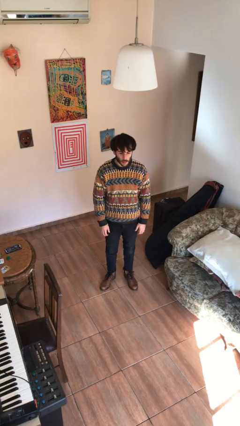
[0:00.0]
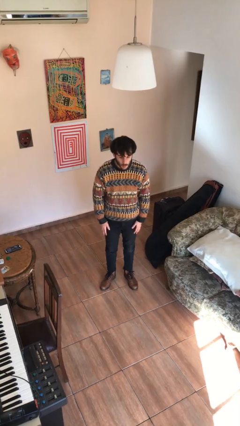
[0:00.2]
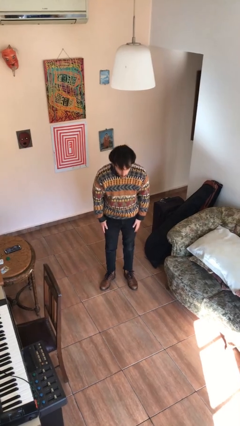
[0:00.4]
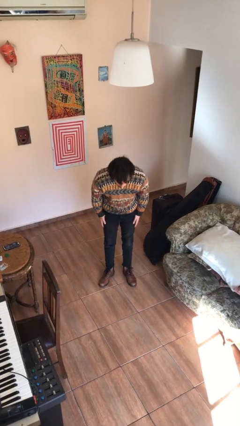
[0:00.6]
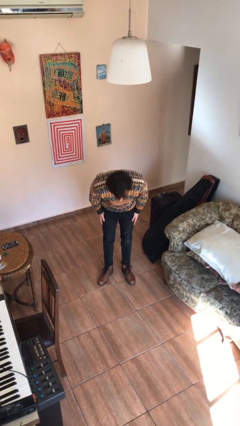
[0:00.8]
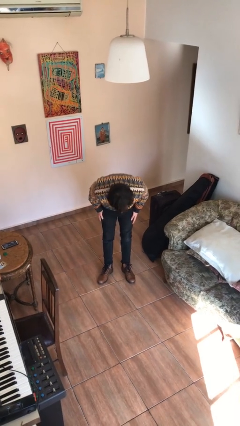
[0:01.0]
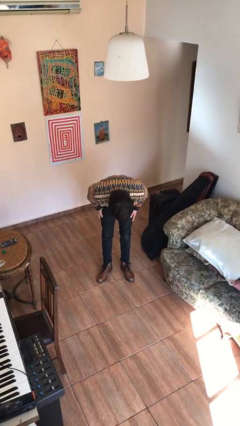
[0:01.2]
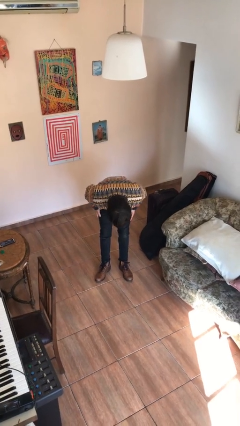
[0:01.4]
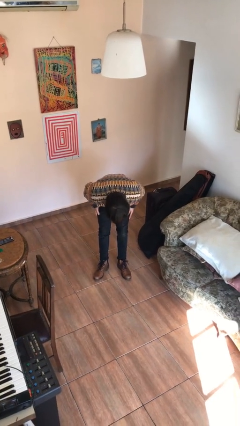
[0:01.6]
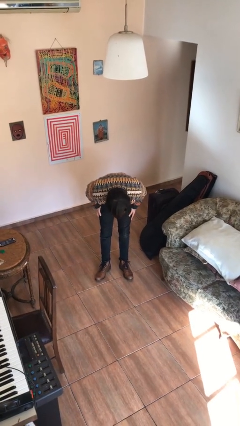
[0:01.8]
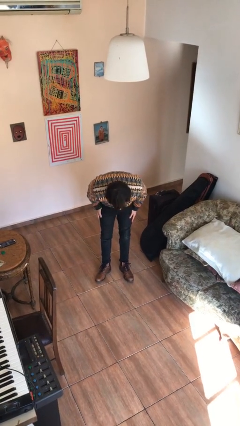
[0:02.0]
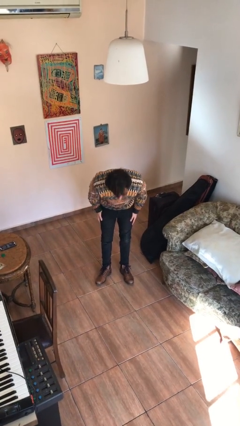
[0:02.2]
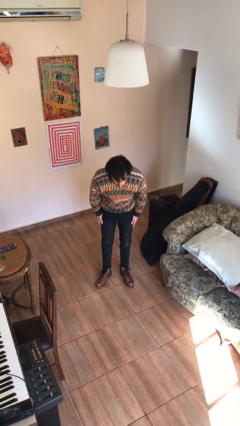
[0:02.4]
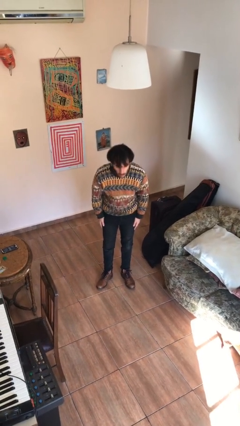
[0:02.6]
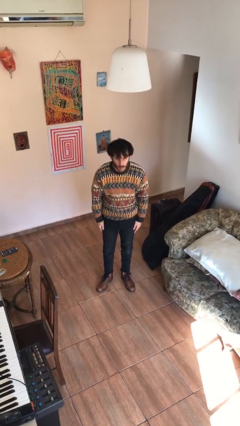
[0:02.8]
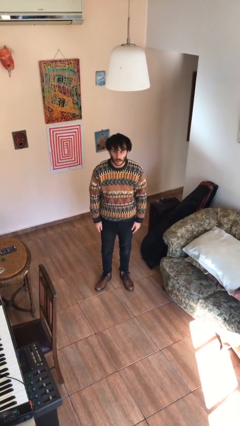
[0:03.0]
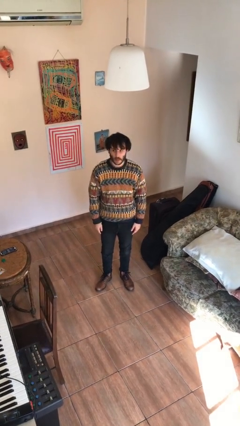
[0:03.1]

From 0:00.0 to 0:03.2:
person bows

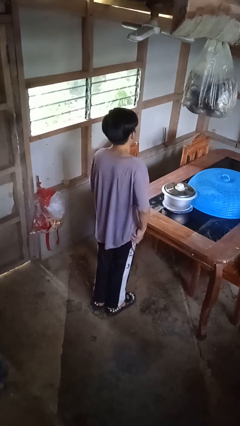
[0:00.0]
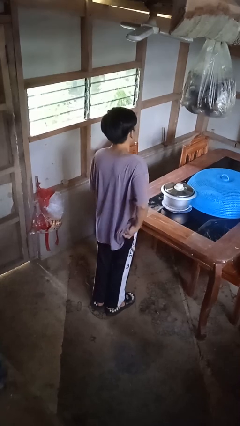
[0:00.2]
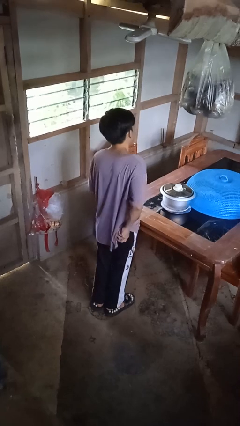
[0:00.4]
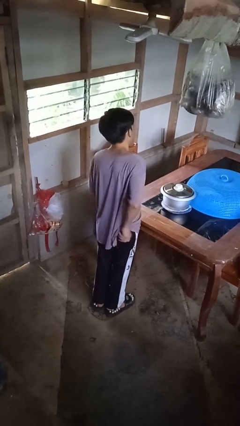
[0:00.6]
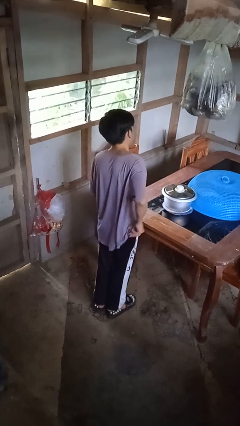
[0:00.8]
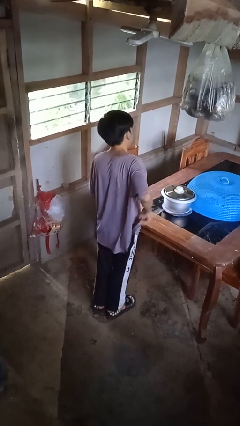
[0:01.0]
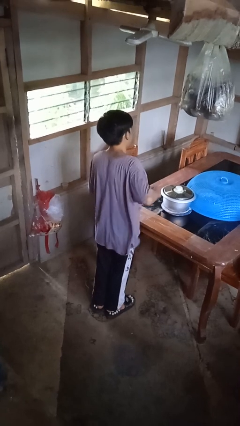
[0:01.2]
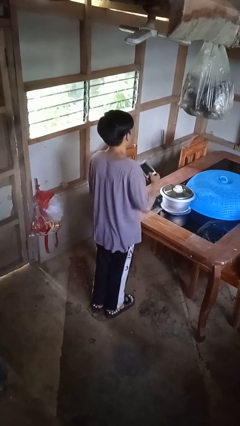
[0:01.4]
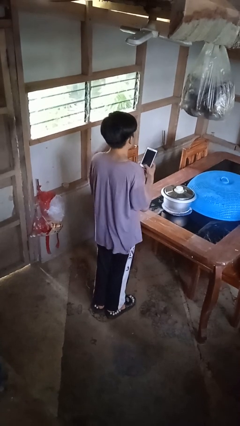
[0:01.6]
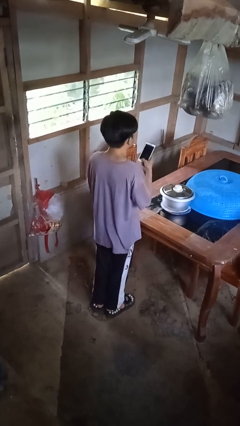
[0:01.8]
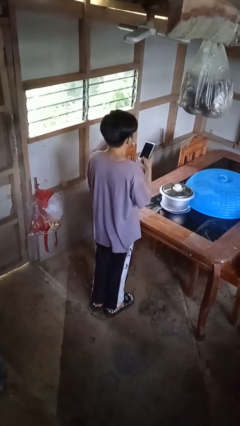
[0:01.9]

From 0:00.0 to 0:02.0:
person takes phone from pocket

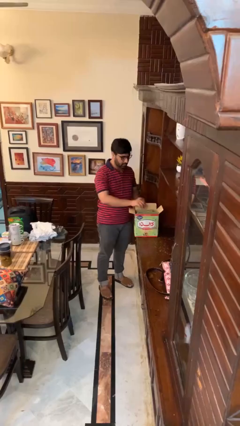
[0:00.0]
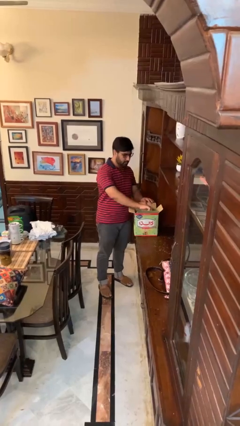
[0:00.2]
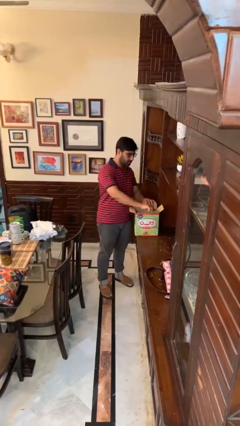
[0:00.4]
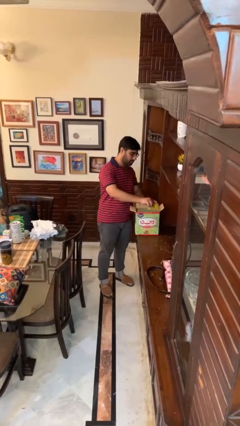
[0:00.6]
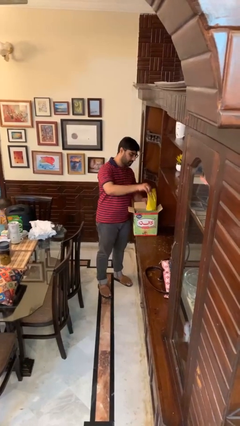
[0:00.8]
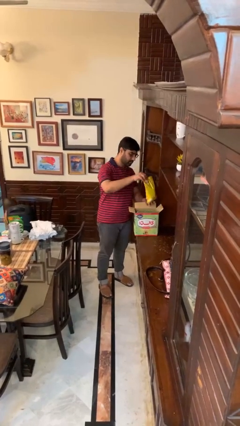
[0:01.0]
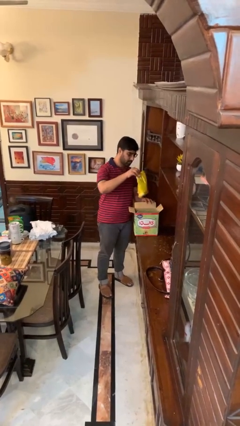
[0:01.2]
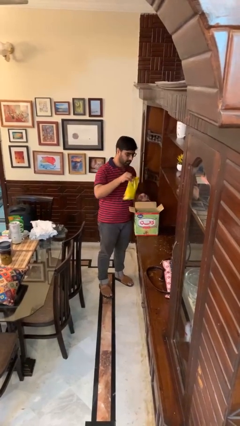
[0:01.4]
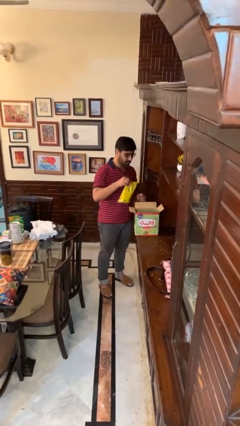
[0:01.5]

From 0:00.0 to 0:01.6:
person takes object from box

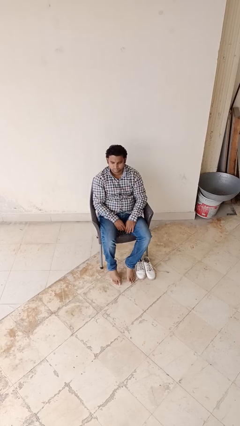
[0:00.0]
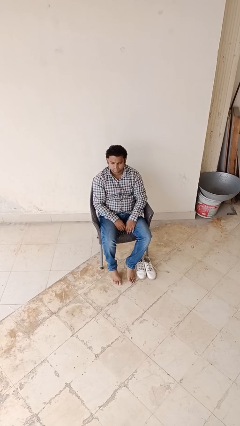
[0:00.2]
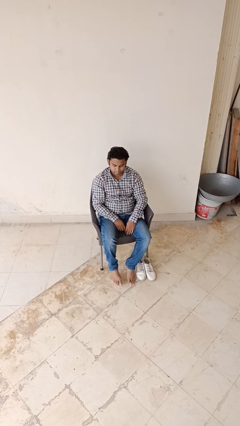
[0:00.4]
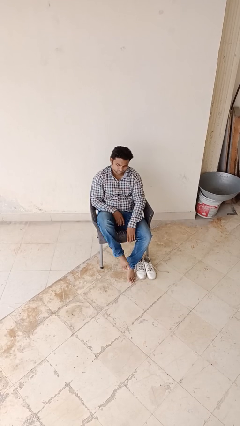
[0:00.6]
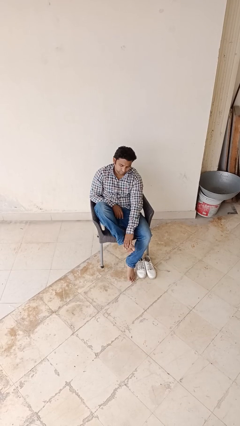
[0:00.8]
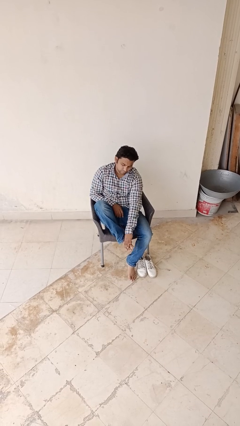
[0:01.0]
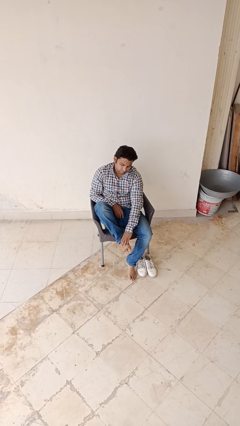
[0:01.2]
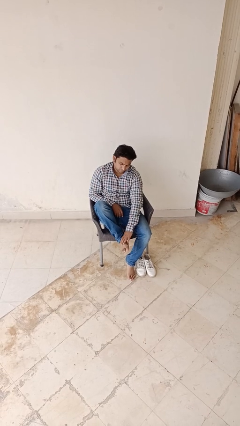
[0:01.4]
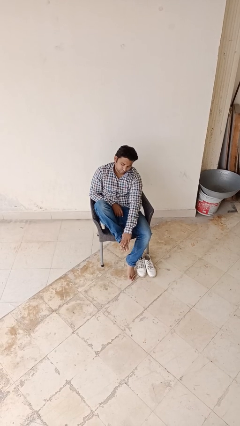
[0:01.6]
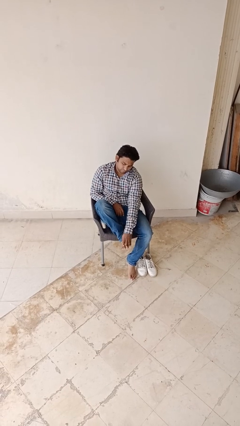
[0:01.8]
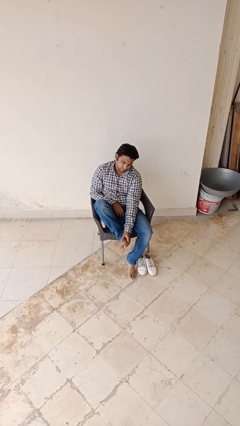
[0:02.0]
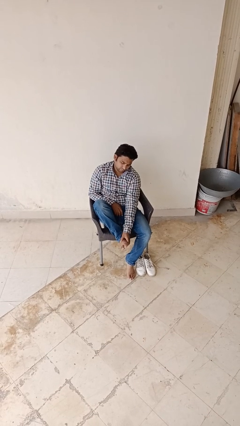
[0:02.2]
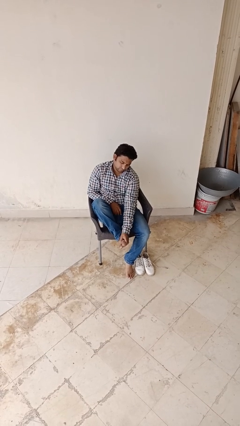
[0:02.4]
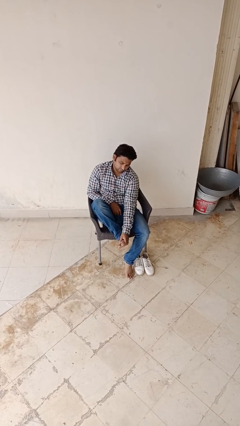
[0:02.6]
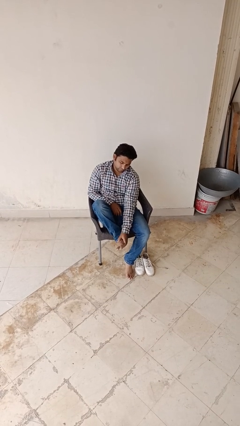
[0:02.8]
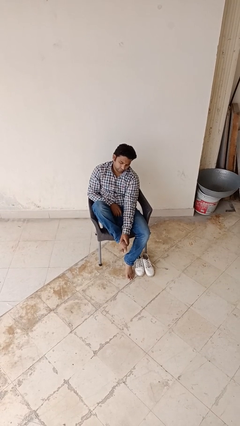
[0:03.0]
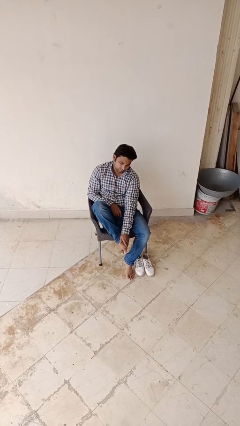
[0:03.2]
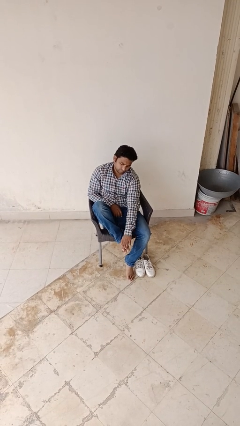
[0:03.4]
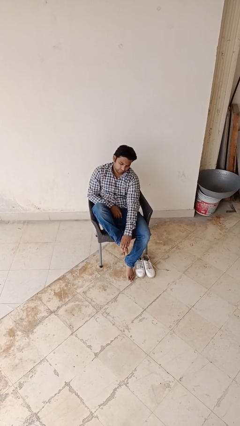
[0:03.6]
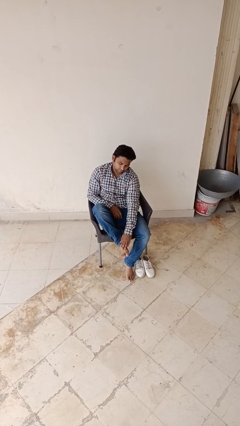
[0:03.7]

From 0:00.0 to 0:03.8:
person rubs foot

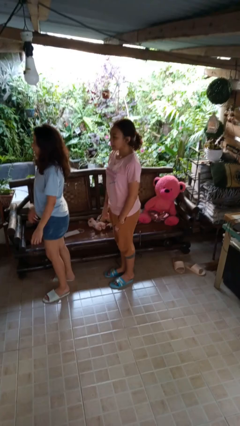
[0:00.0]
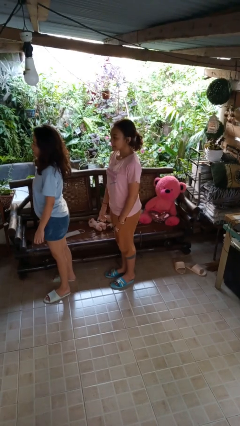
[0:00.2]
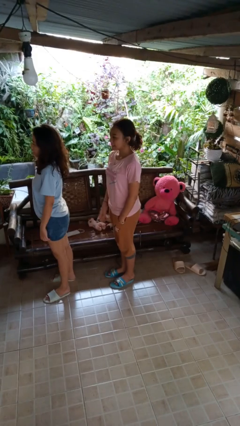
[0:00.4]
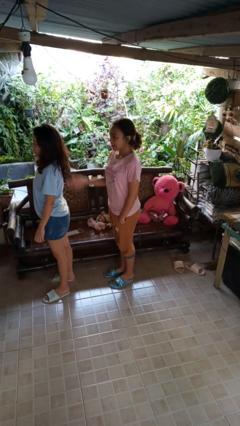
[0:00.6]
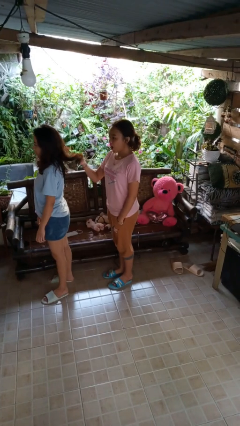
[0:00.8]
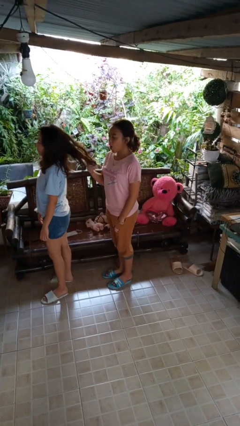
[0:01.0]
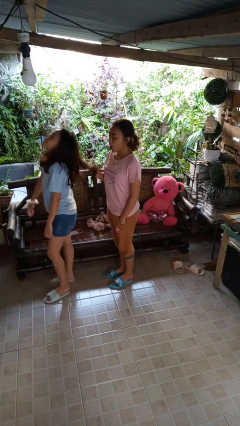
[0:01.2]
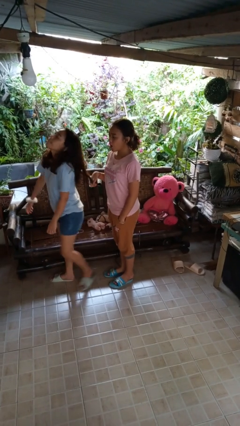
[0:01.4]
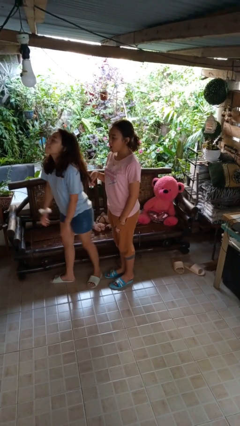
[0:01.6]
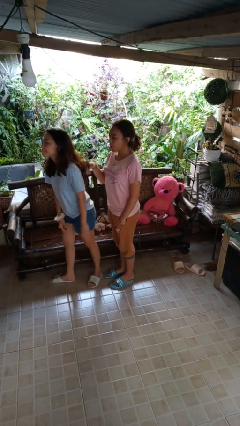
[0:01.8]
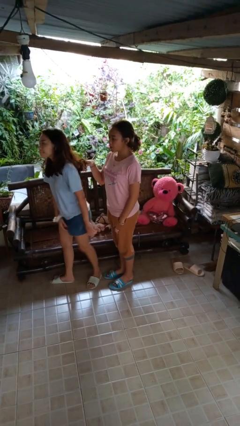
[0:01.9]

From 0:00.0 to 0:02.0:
person grabs person by hair

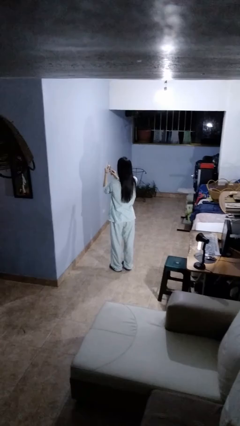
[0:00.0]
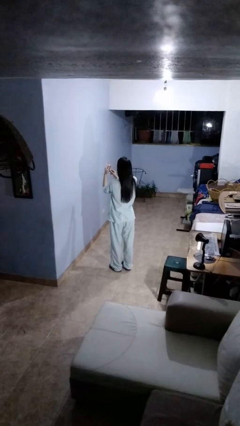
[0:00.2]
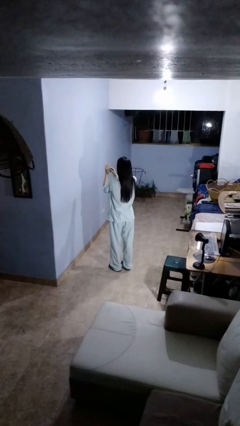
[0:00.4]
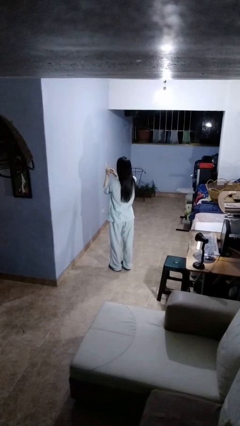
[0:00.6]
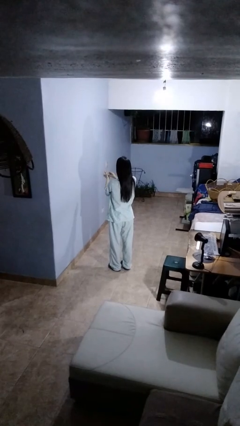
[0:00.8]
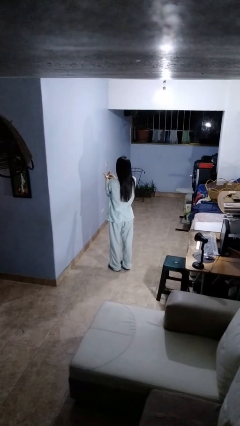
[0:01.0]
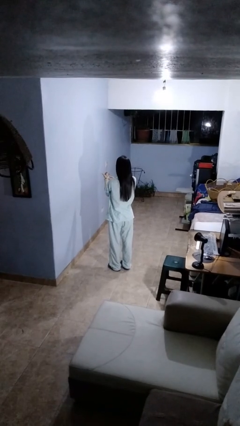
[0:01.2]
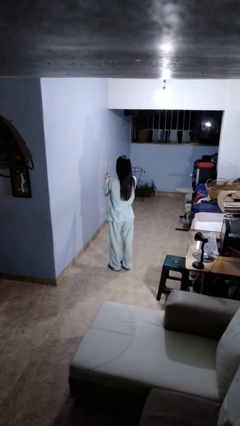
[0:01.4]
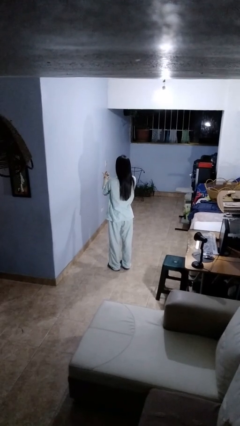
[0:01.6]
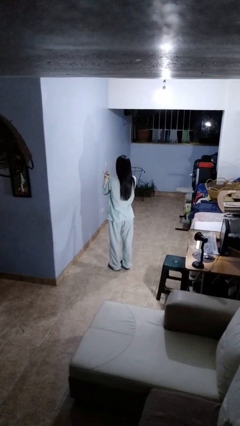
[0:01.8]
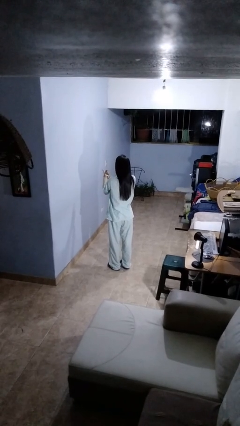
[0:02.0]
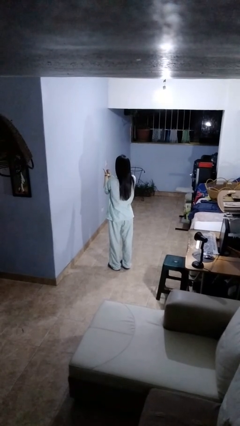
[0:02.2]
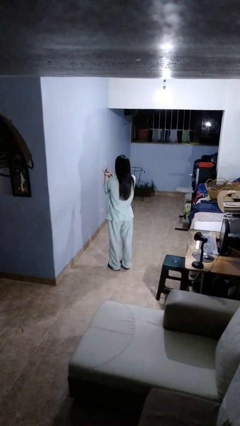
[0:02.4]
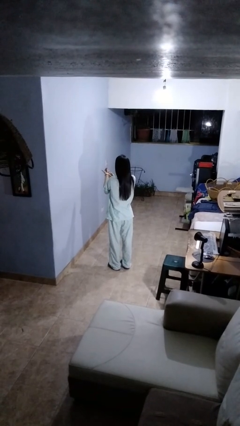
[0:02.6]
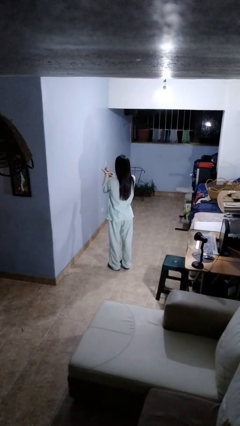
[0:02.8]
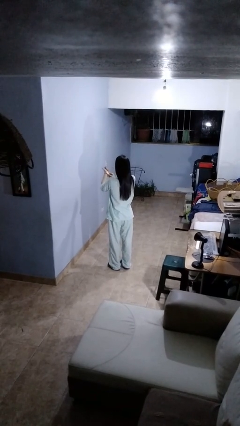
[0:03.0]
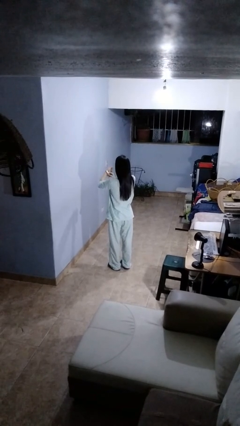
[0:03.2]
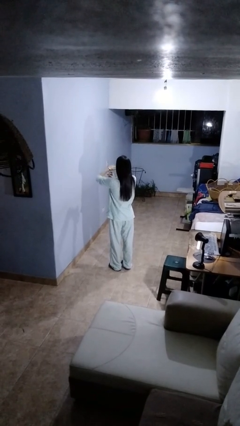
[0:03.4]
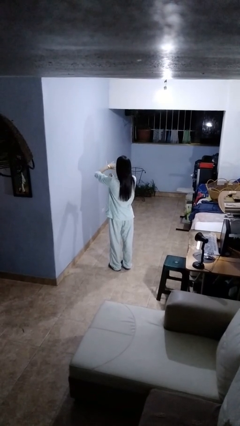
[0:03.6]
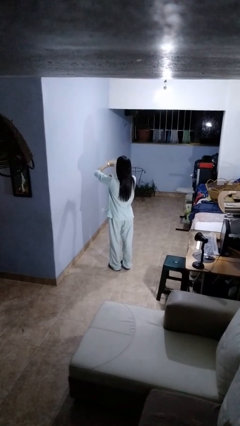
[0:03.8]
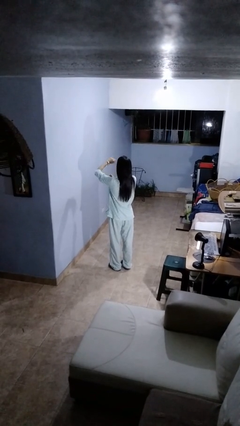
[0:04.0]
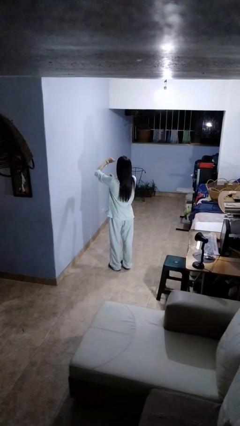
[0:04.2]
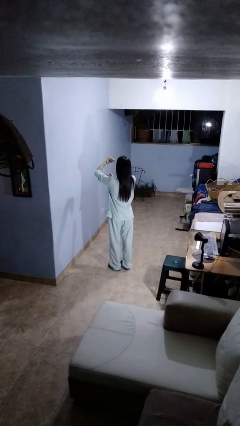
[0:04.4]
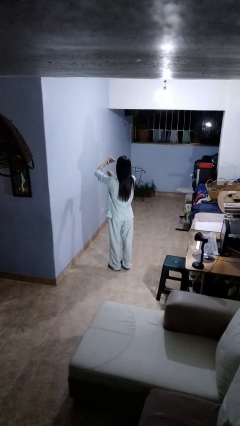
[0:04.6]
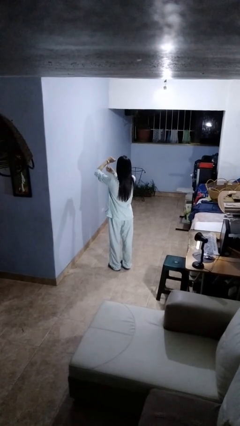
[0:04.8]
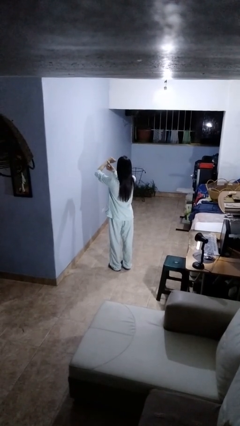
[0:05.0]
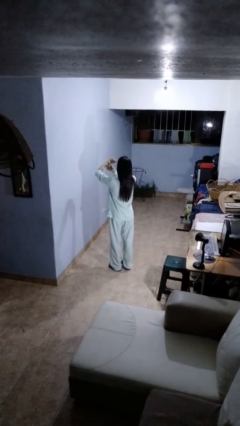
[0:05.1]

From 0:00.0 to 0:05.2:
person puts on wristwatch
